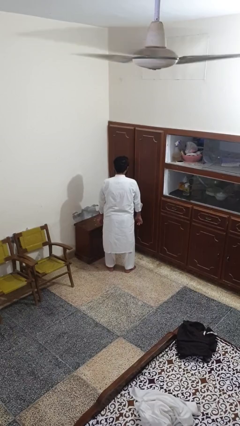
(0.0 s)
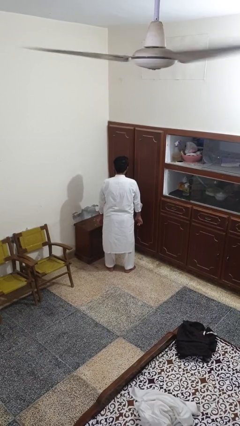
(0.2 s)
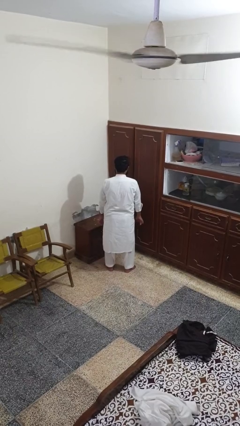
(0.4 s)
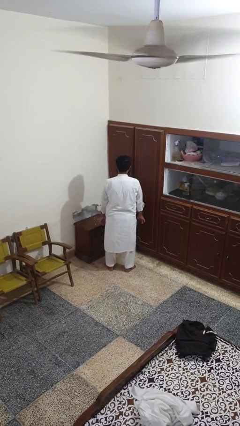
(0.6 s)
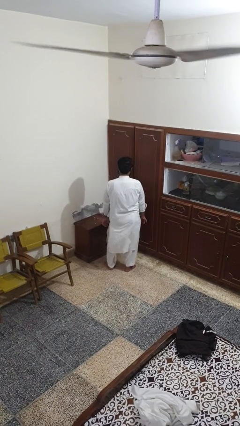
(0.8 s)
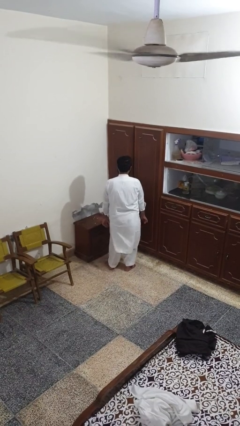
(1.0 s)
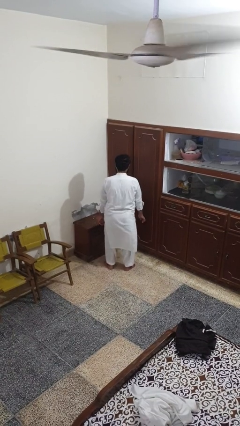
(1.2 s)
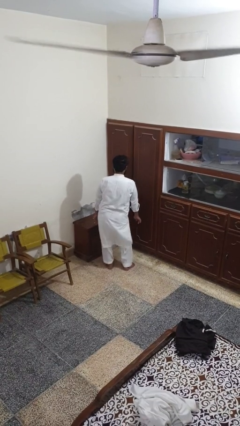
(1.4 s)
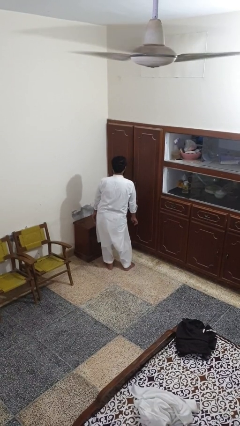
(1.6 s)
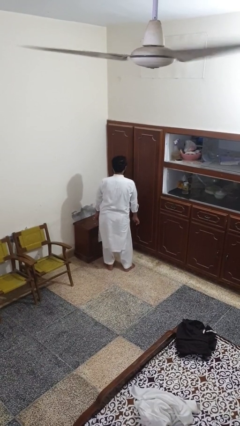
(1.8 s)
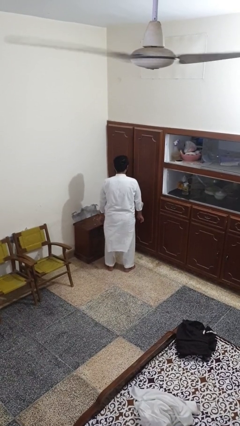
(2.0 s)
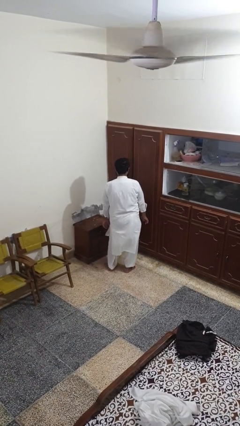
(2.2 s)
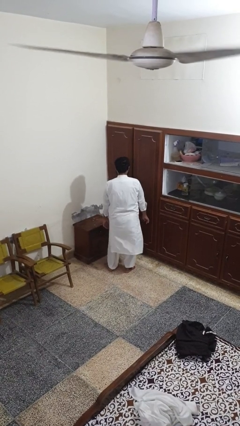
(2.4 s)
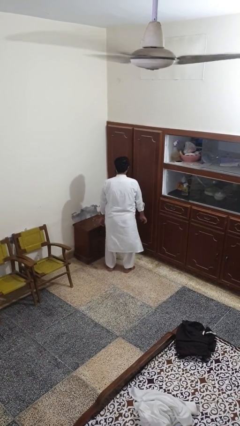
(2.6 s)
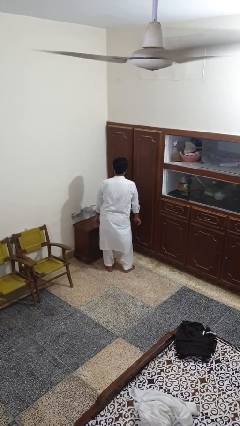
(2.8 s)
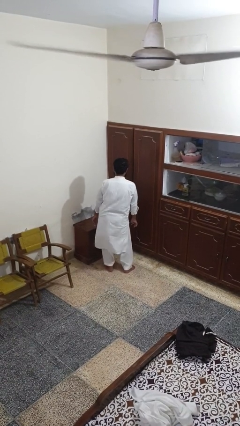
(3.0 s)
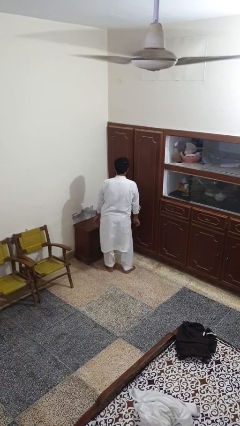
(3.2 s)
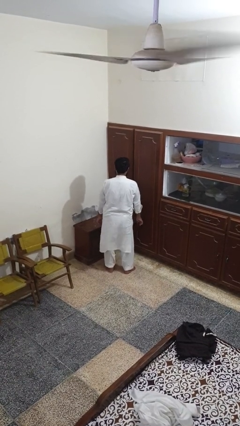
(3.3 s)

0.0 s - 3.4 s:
person wiggles hips

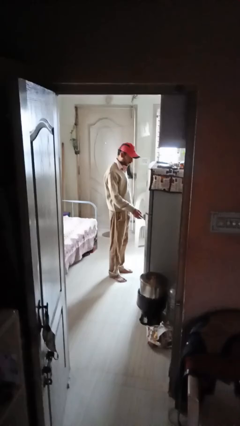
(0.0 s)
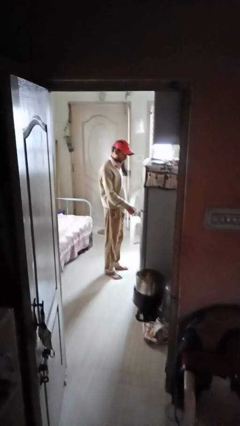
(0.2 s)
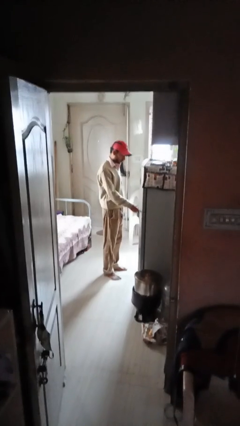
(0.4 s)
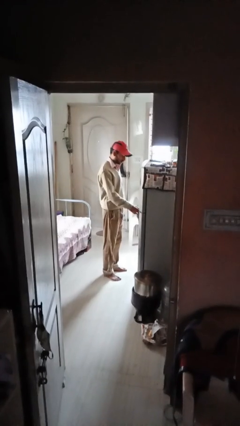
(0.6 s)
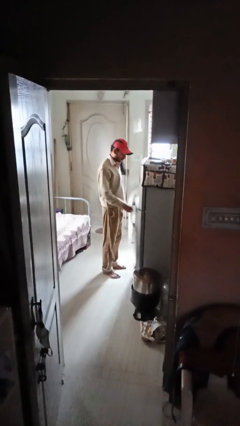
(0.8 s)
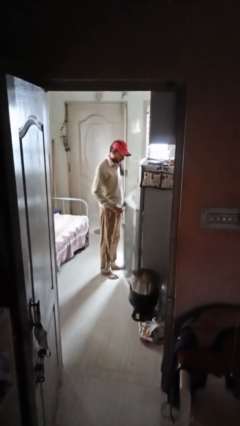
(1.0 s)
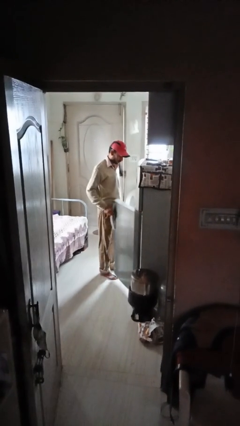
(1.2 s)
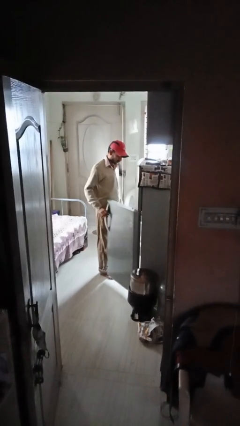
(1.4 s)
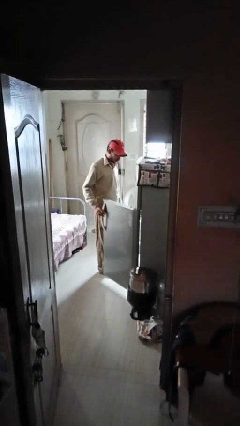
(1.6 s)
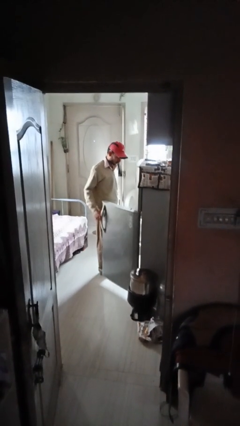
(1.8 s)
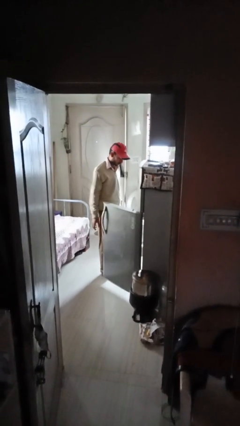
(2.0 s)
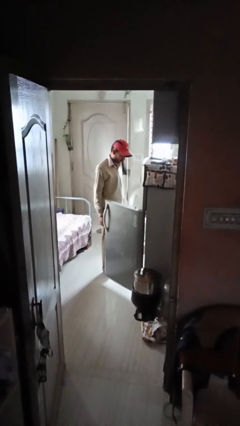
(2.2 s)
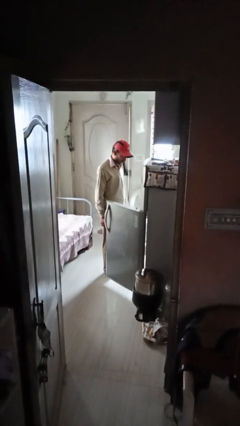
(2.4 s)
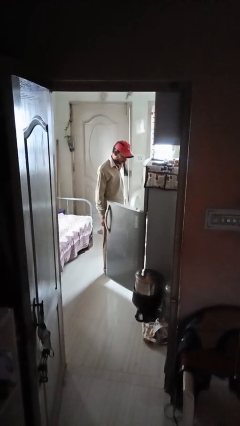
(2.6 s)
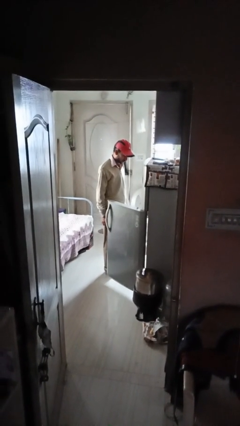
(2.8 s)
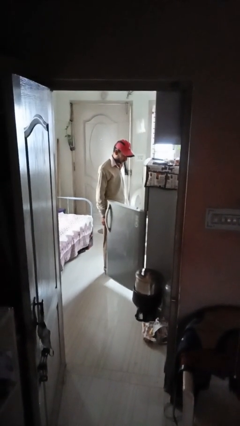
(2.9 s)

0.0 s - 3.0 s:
person opens refrigerator

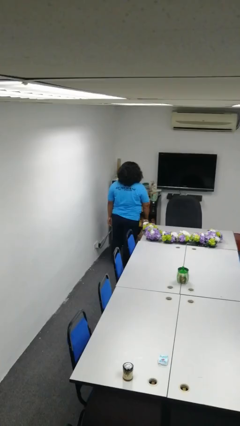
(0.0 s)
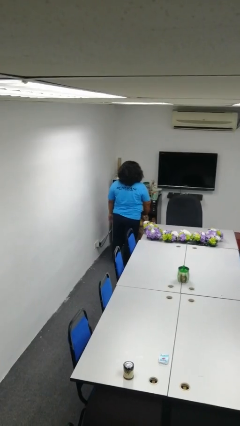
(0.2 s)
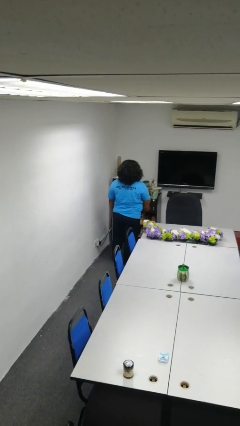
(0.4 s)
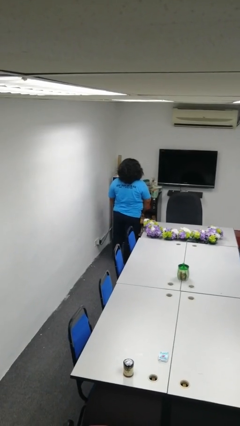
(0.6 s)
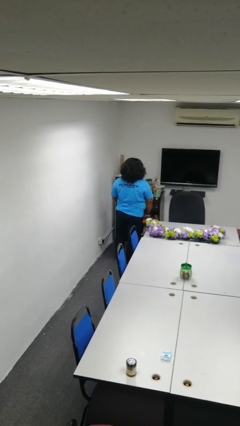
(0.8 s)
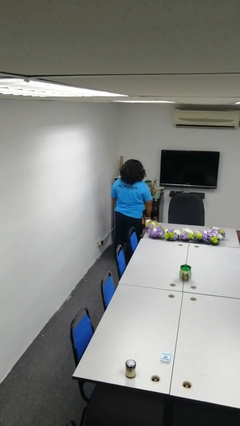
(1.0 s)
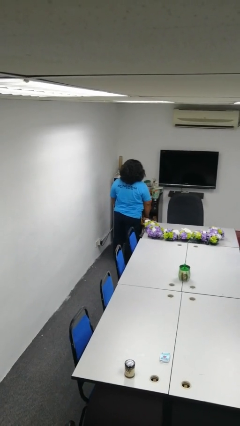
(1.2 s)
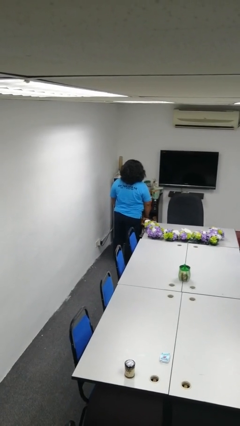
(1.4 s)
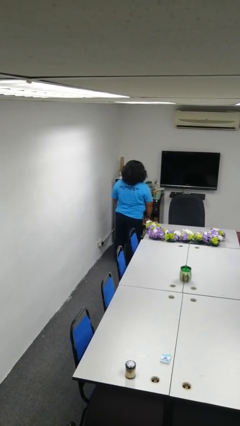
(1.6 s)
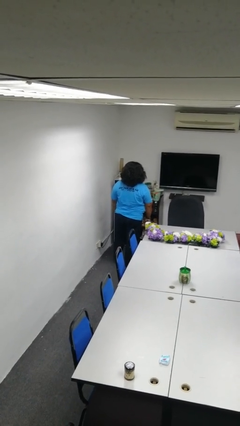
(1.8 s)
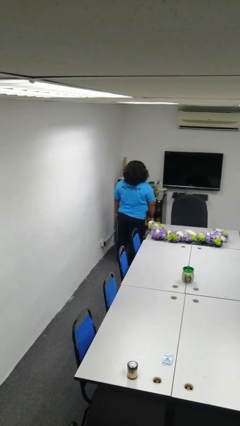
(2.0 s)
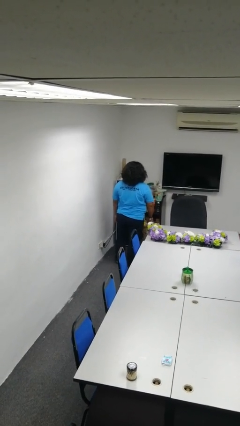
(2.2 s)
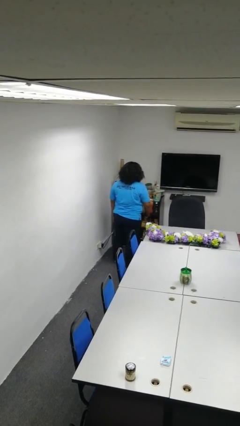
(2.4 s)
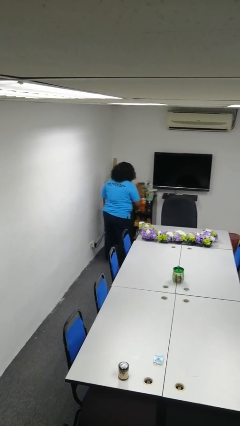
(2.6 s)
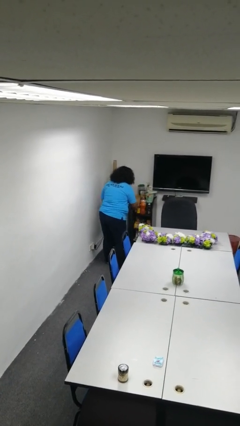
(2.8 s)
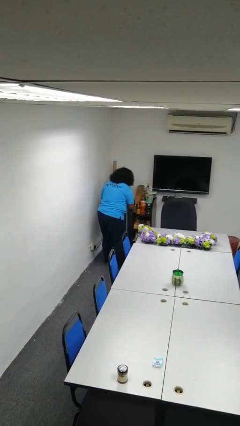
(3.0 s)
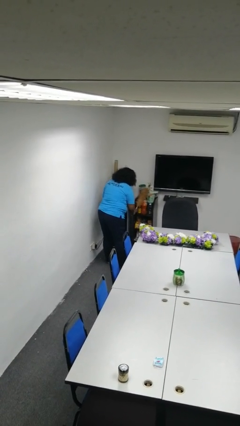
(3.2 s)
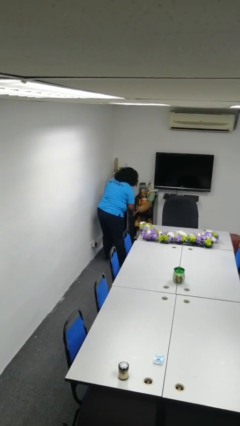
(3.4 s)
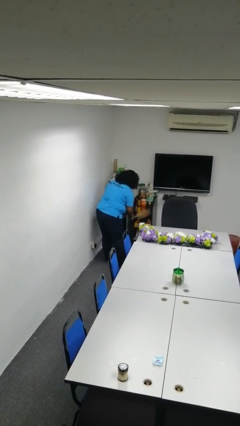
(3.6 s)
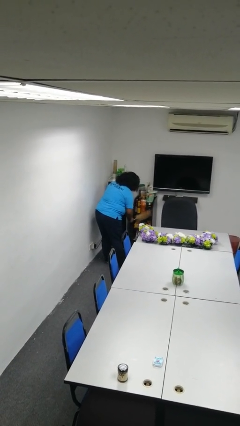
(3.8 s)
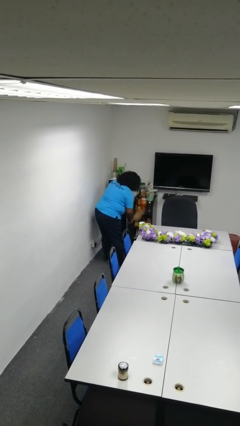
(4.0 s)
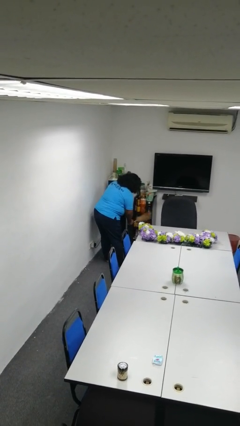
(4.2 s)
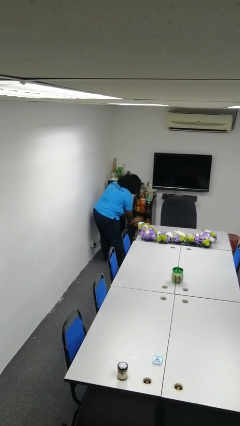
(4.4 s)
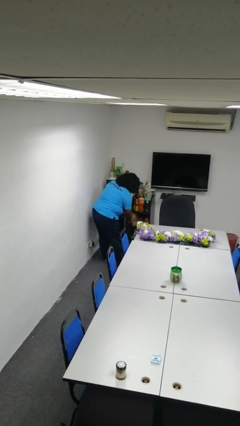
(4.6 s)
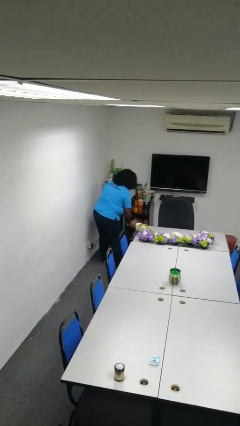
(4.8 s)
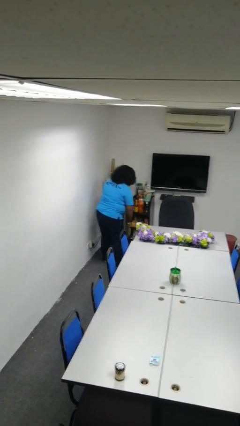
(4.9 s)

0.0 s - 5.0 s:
person dusts furniture

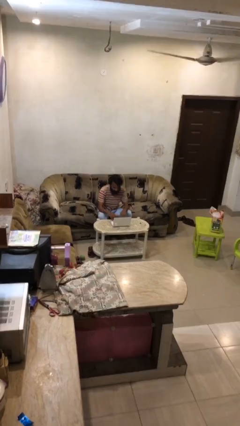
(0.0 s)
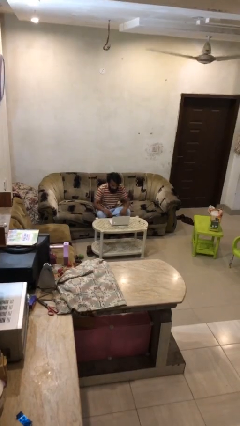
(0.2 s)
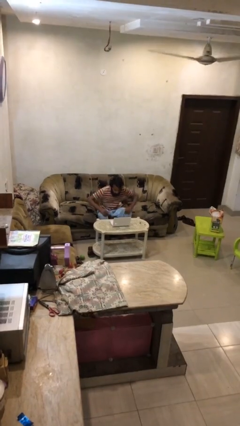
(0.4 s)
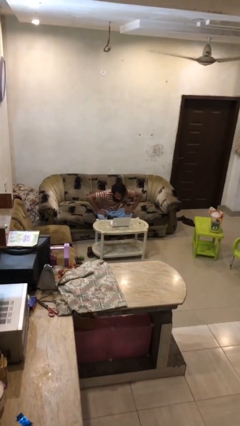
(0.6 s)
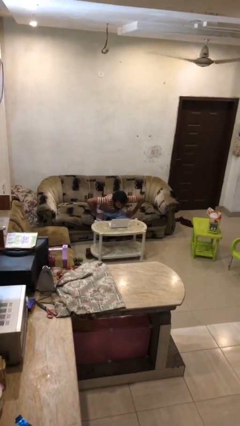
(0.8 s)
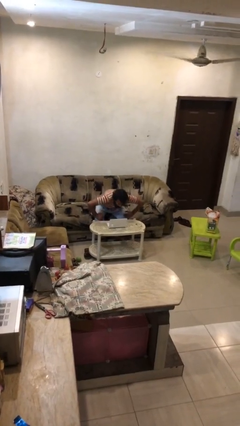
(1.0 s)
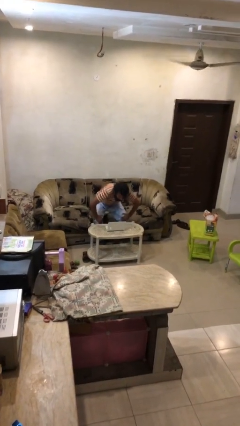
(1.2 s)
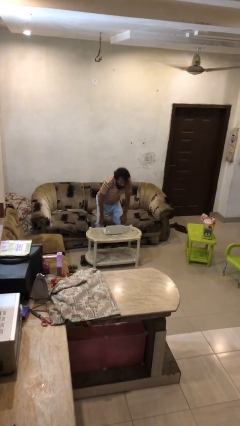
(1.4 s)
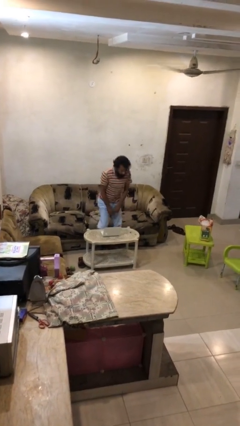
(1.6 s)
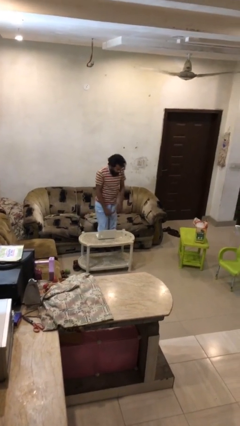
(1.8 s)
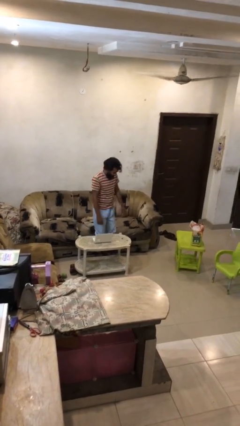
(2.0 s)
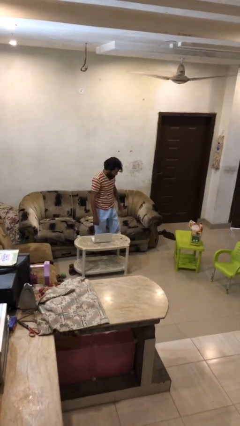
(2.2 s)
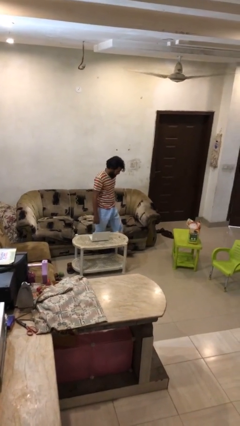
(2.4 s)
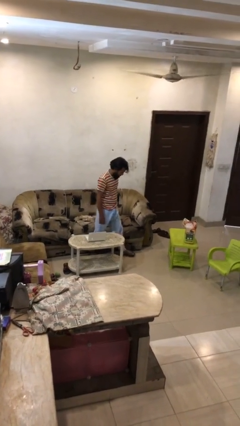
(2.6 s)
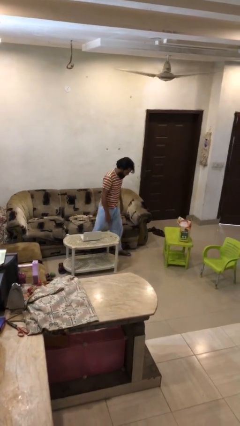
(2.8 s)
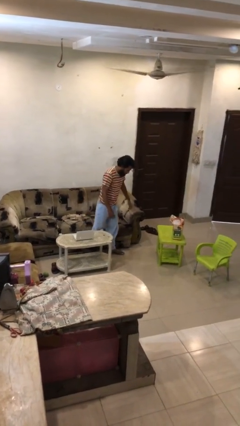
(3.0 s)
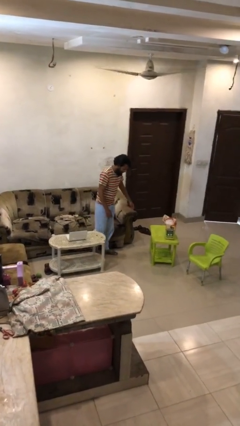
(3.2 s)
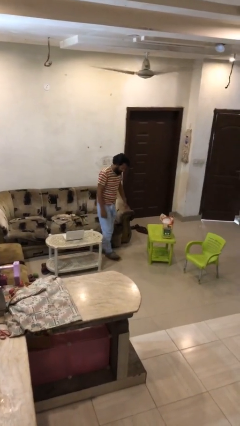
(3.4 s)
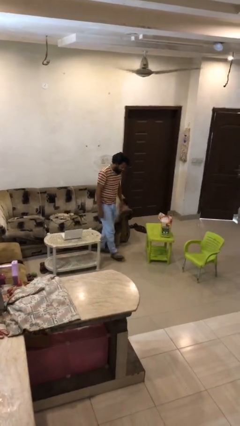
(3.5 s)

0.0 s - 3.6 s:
person stands up

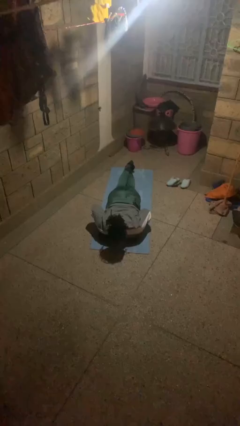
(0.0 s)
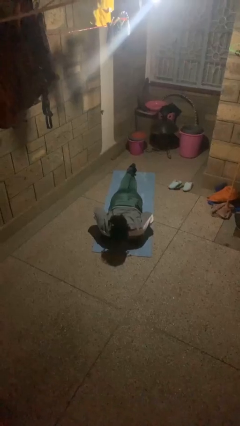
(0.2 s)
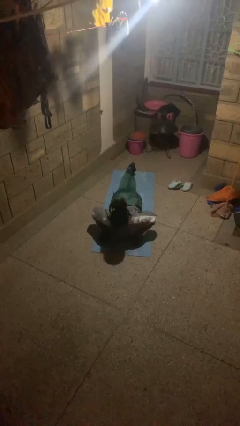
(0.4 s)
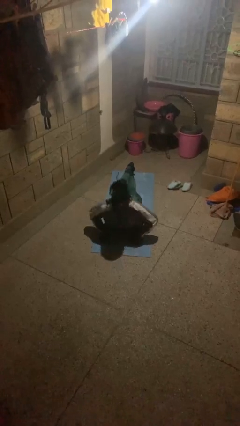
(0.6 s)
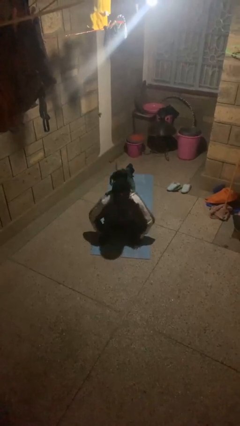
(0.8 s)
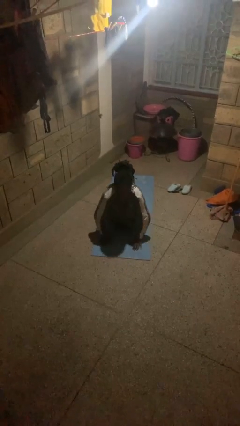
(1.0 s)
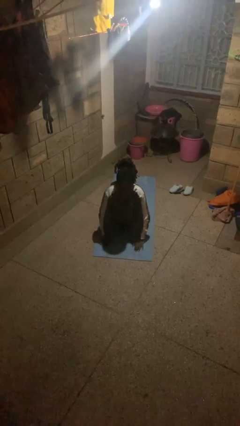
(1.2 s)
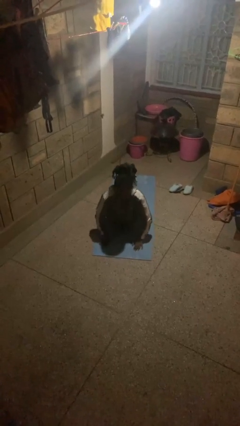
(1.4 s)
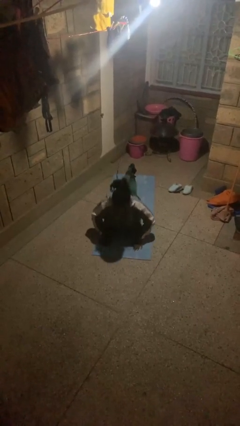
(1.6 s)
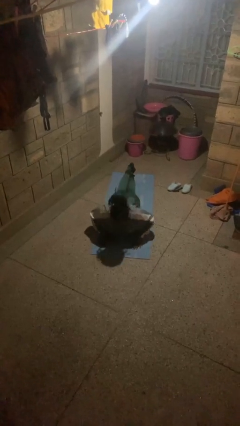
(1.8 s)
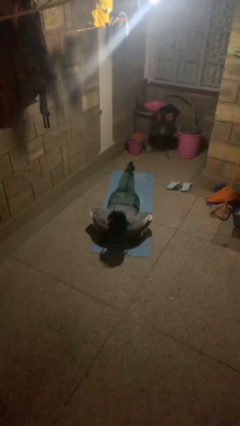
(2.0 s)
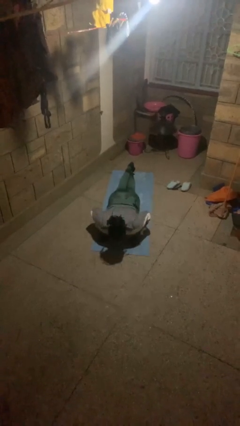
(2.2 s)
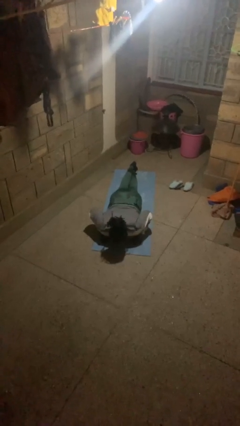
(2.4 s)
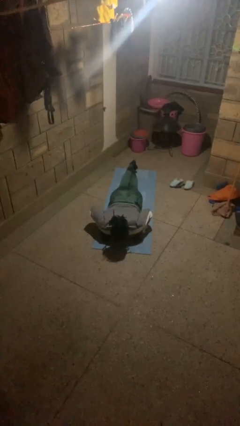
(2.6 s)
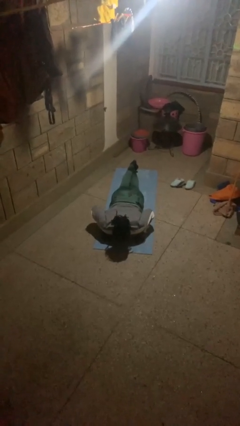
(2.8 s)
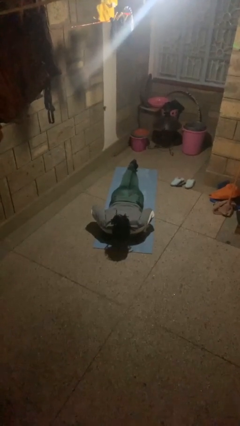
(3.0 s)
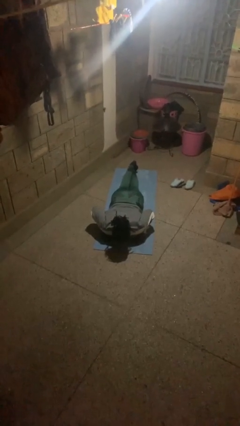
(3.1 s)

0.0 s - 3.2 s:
person exercises with pushup
